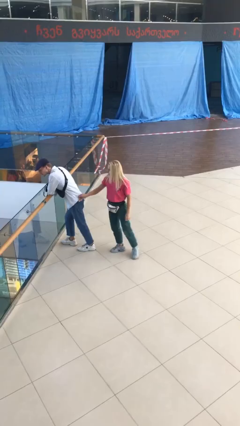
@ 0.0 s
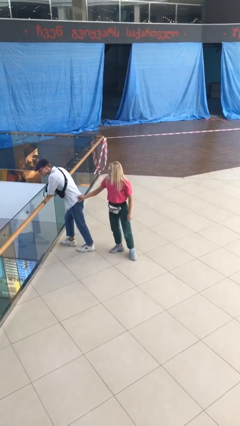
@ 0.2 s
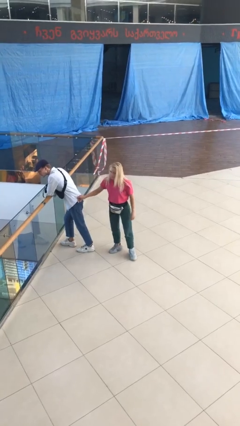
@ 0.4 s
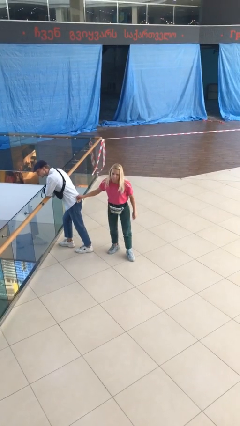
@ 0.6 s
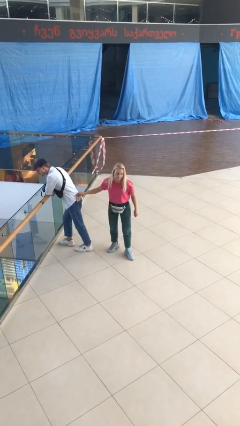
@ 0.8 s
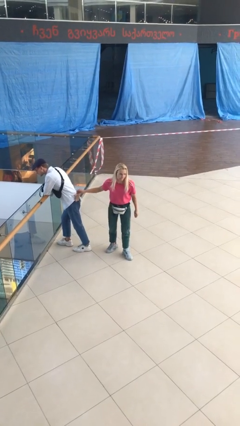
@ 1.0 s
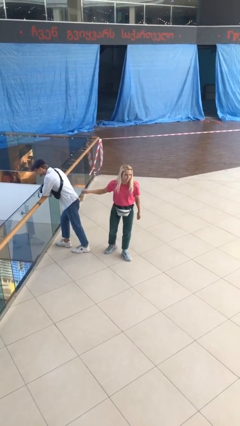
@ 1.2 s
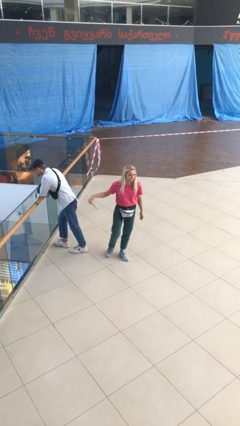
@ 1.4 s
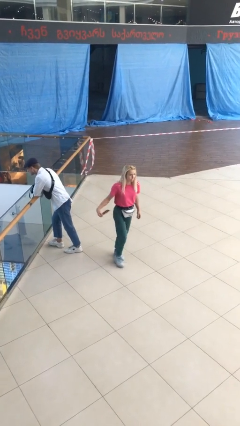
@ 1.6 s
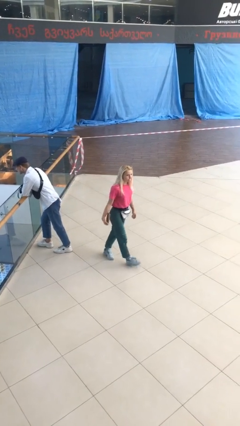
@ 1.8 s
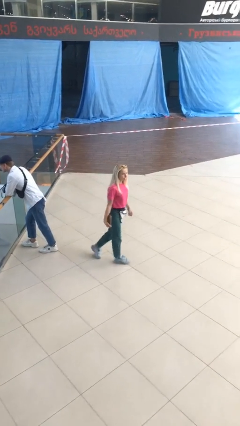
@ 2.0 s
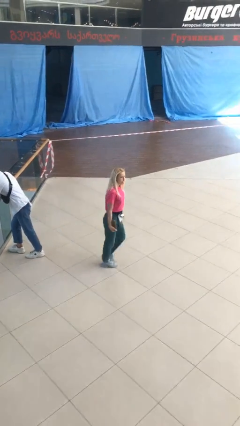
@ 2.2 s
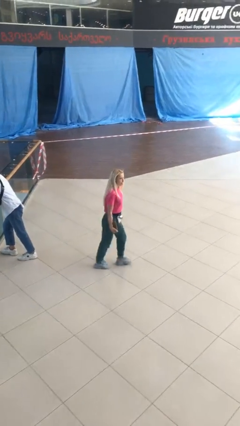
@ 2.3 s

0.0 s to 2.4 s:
person steals object from person

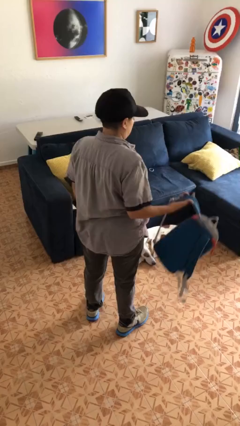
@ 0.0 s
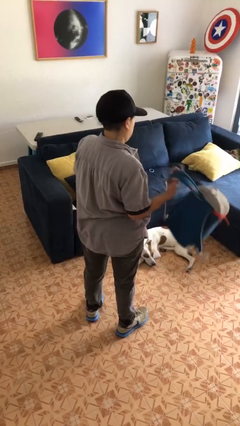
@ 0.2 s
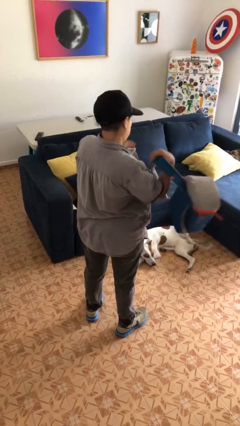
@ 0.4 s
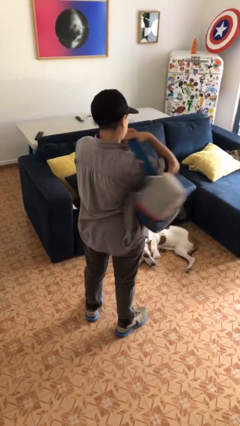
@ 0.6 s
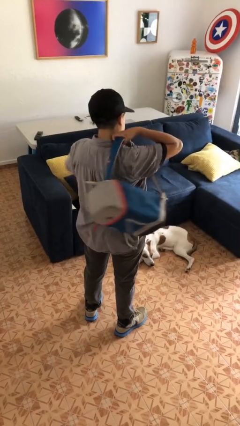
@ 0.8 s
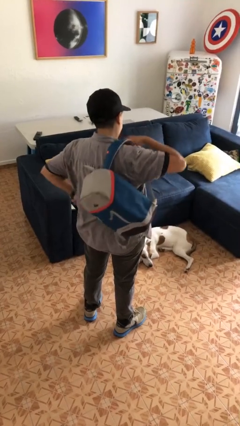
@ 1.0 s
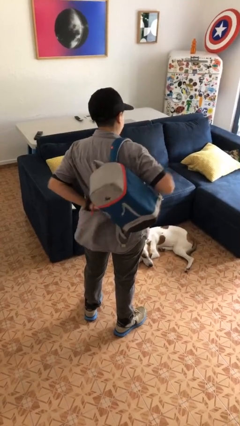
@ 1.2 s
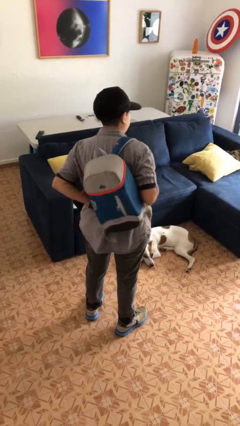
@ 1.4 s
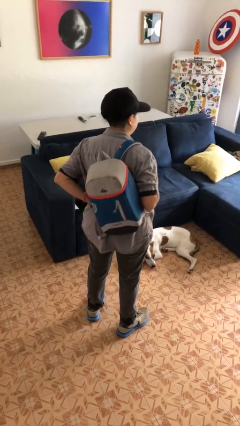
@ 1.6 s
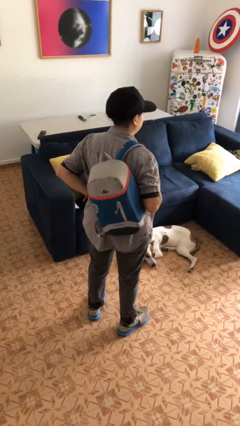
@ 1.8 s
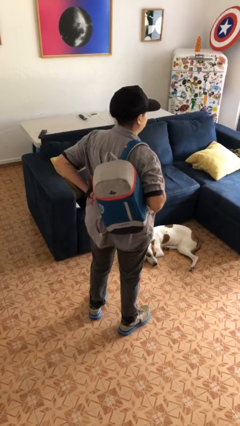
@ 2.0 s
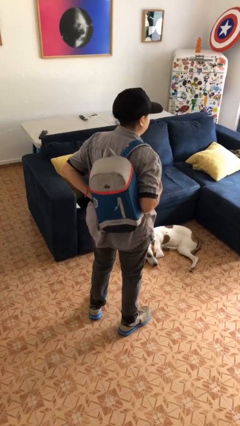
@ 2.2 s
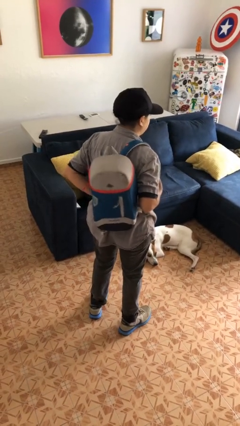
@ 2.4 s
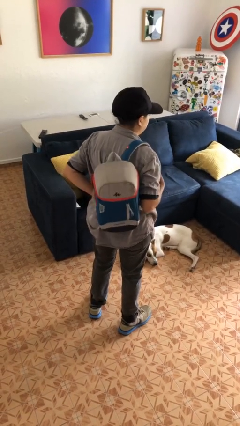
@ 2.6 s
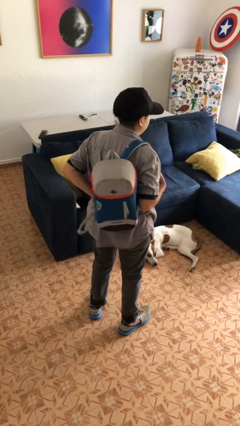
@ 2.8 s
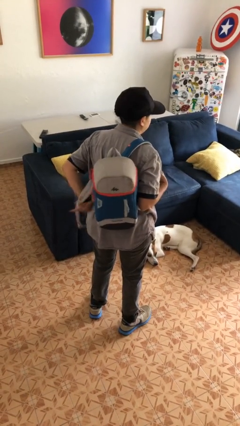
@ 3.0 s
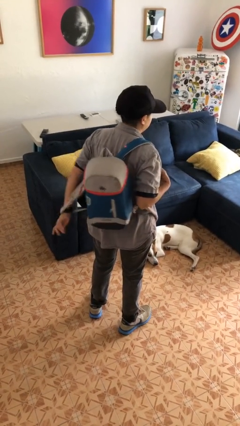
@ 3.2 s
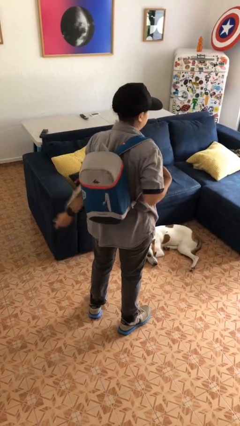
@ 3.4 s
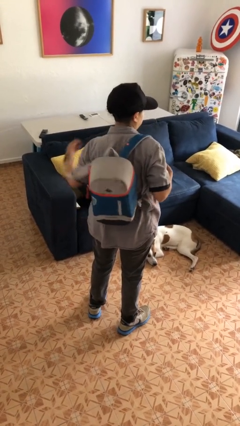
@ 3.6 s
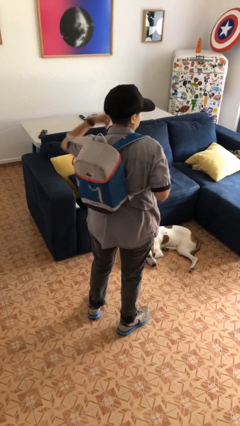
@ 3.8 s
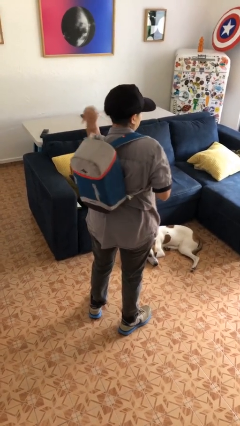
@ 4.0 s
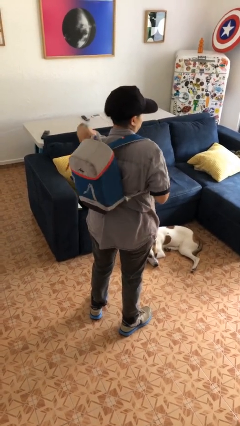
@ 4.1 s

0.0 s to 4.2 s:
person puts on backpack

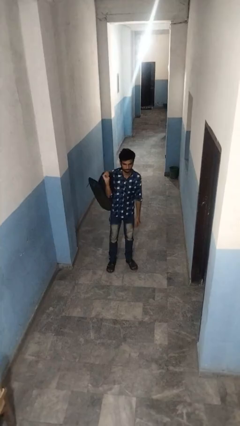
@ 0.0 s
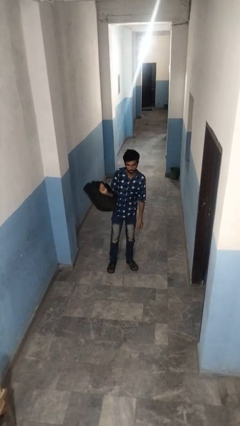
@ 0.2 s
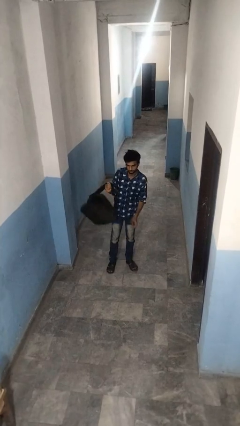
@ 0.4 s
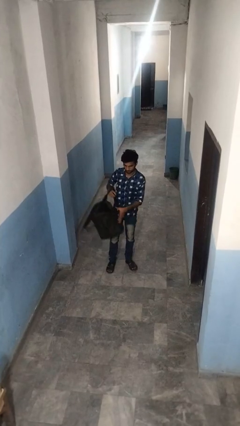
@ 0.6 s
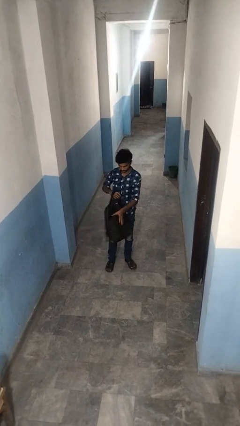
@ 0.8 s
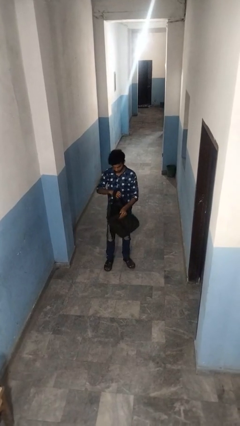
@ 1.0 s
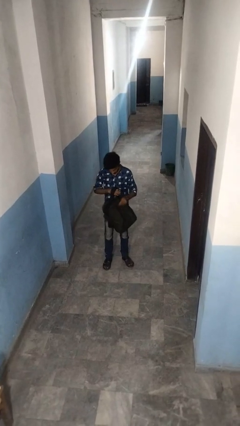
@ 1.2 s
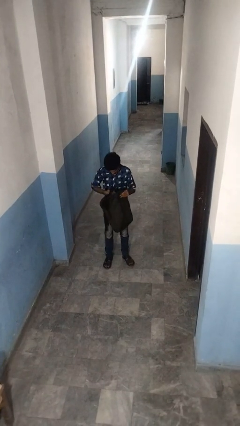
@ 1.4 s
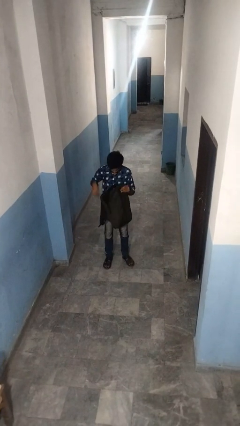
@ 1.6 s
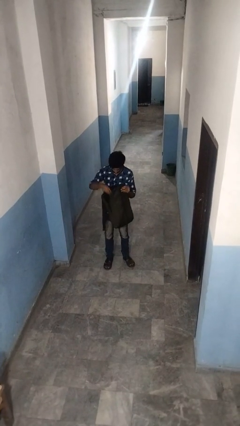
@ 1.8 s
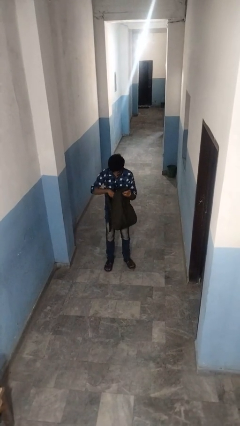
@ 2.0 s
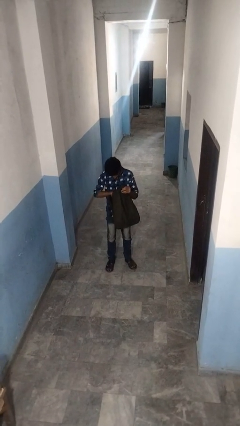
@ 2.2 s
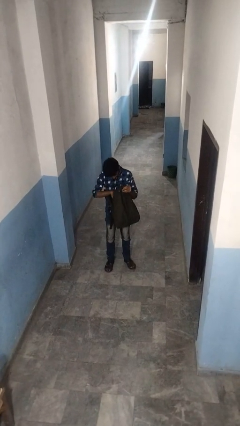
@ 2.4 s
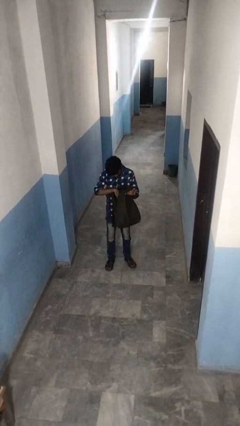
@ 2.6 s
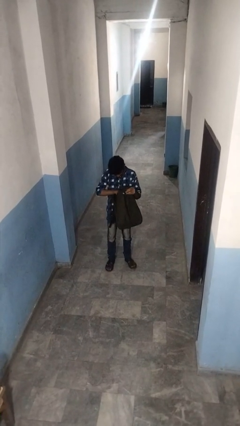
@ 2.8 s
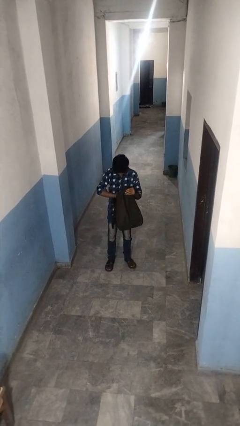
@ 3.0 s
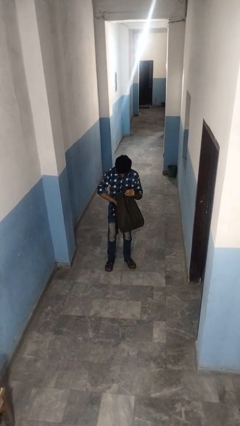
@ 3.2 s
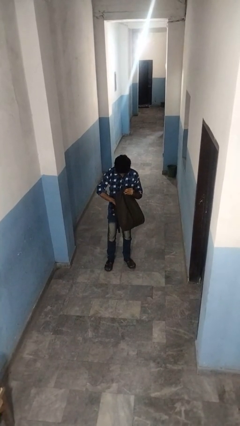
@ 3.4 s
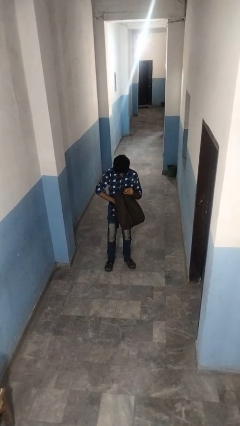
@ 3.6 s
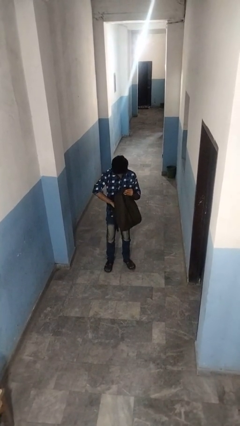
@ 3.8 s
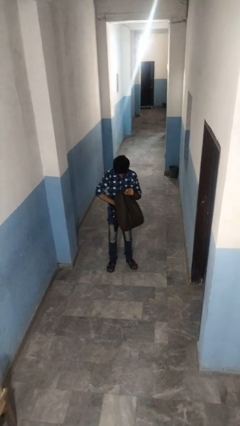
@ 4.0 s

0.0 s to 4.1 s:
person searches in backpack

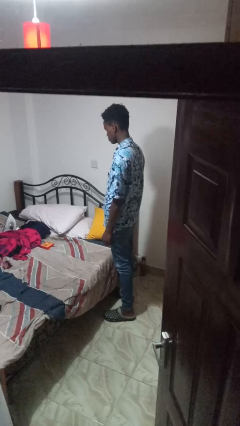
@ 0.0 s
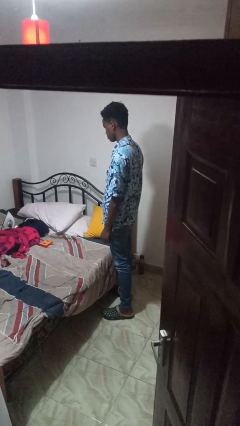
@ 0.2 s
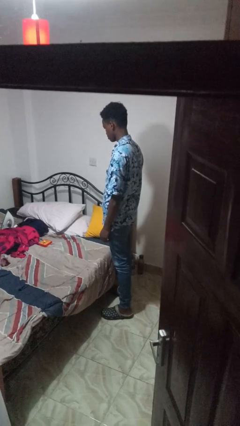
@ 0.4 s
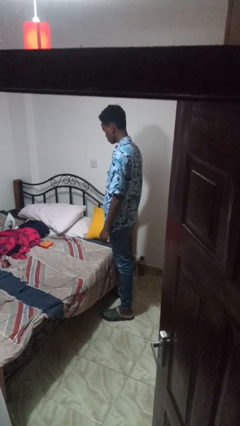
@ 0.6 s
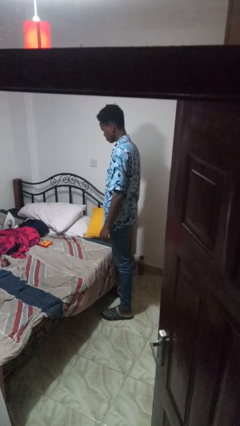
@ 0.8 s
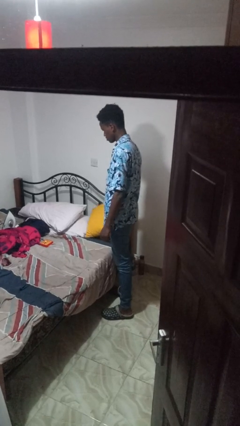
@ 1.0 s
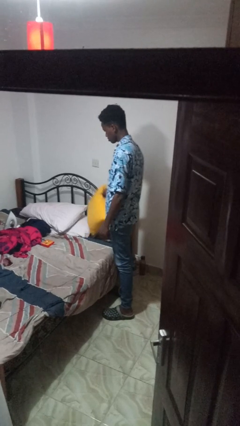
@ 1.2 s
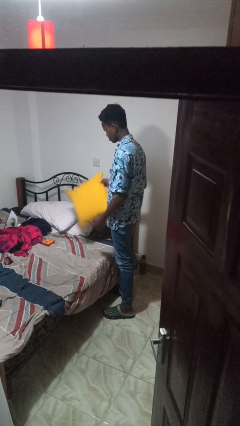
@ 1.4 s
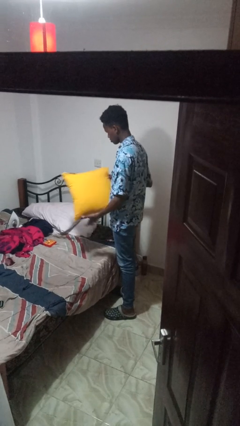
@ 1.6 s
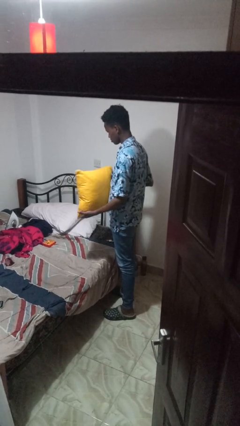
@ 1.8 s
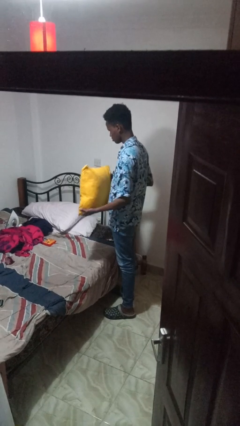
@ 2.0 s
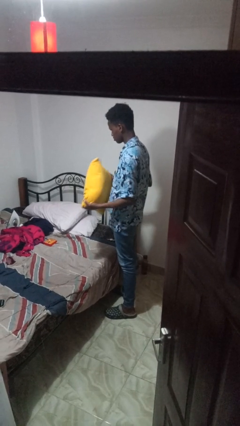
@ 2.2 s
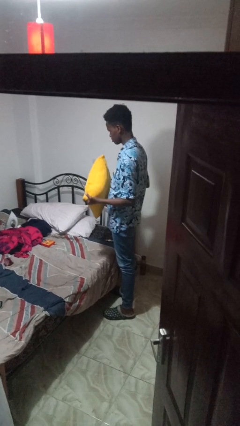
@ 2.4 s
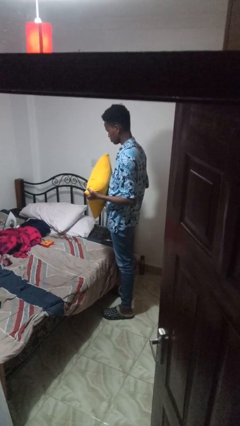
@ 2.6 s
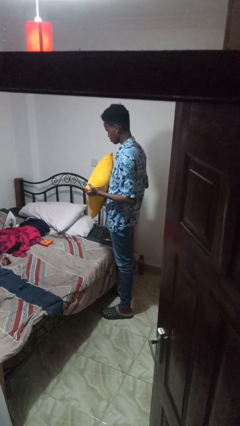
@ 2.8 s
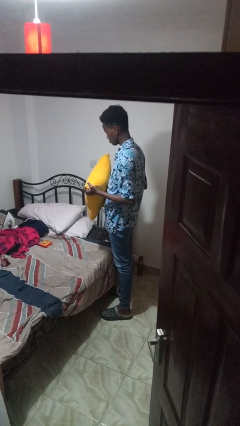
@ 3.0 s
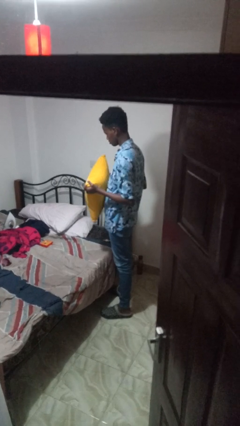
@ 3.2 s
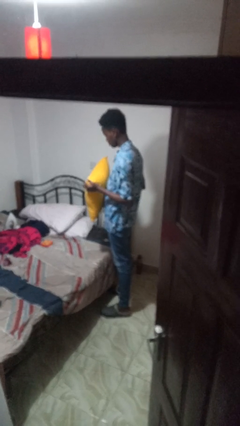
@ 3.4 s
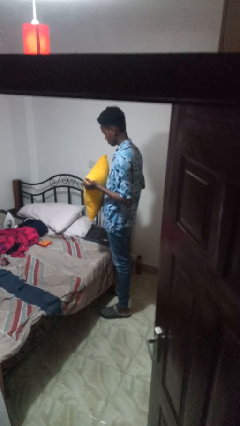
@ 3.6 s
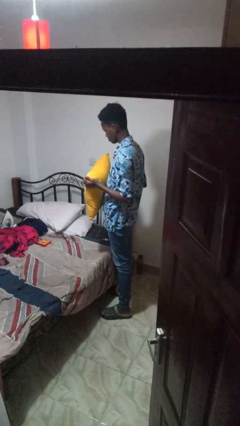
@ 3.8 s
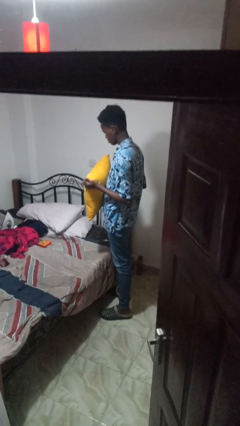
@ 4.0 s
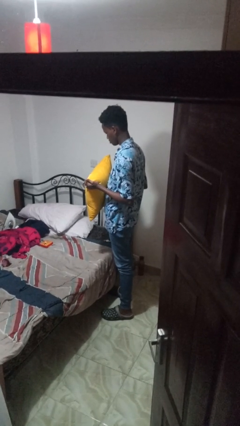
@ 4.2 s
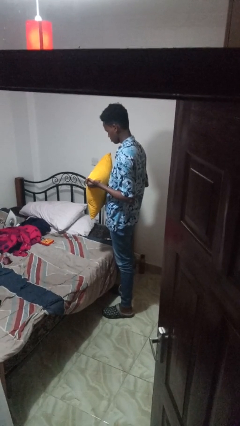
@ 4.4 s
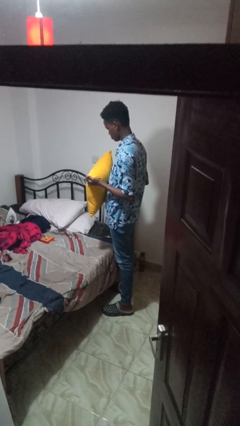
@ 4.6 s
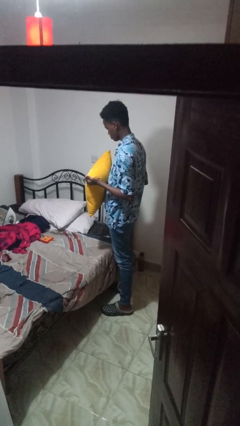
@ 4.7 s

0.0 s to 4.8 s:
person picks up object from bed

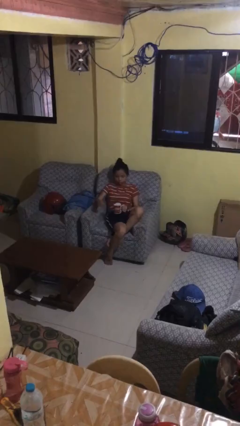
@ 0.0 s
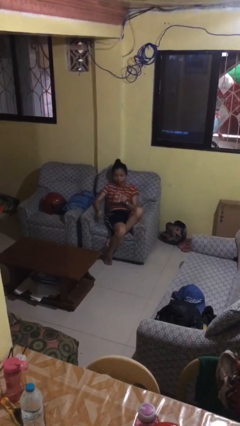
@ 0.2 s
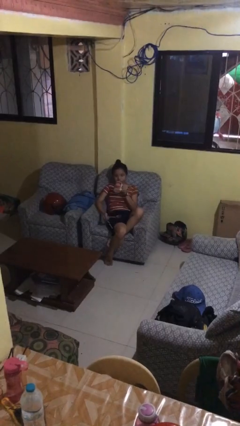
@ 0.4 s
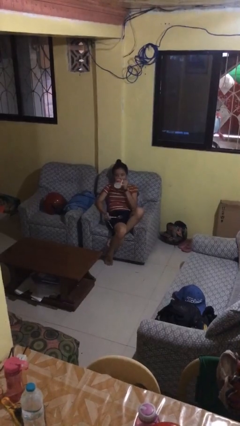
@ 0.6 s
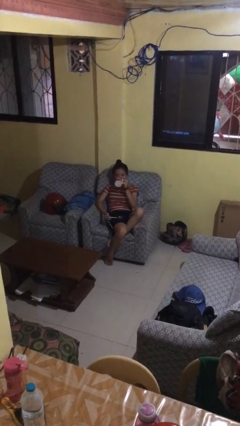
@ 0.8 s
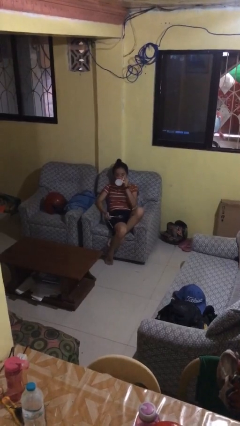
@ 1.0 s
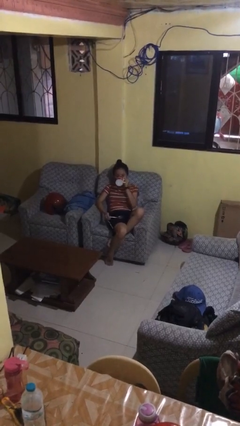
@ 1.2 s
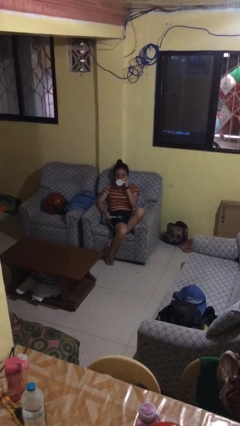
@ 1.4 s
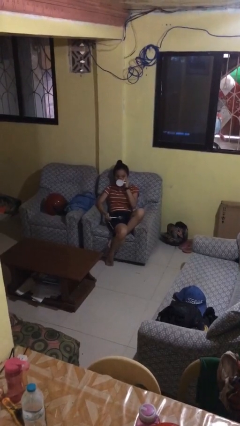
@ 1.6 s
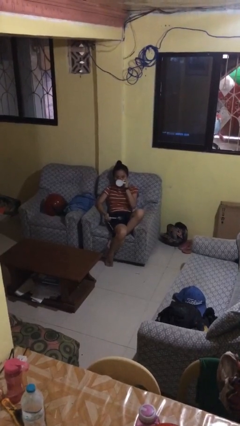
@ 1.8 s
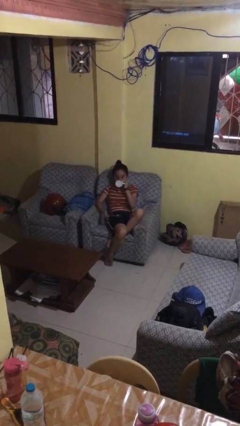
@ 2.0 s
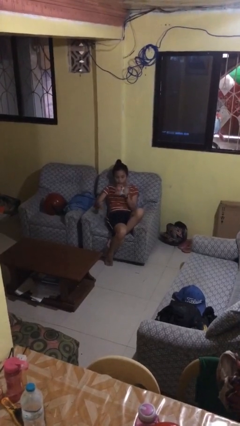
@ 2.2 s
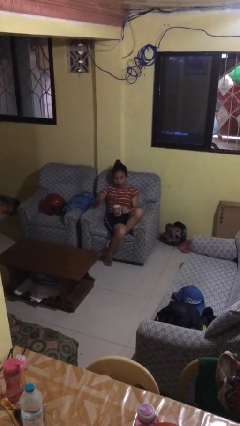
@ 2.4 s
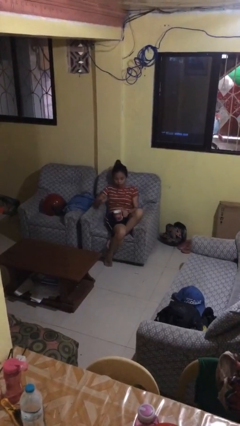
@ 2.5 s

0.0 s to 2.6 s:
person drinks from mug
